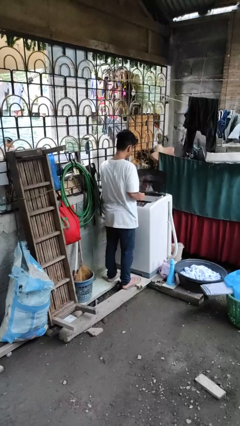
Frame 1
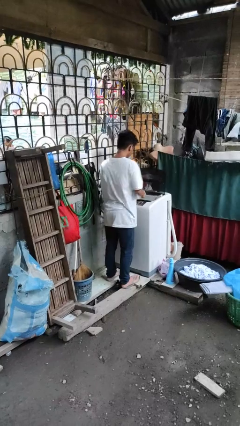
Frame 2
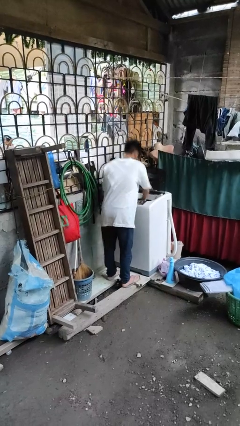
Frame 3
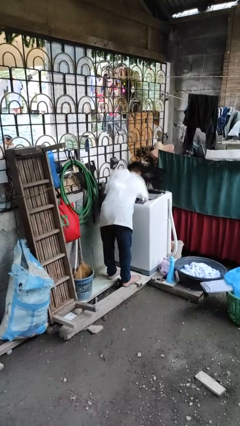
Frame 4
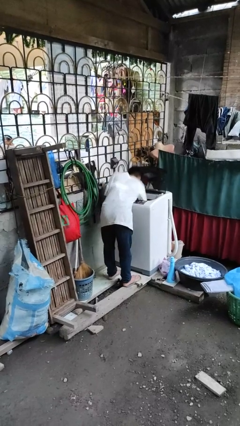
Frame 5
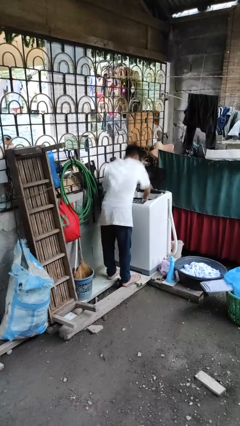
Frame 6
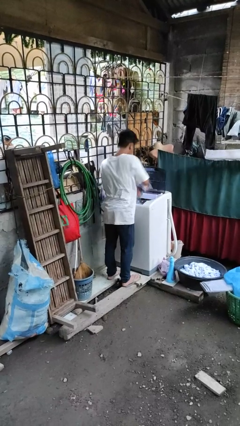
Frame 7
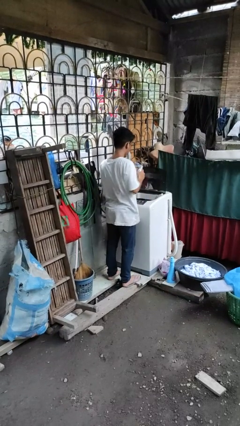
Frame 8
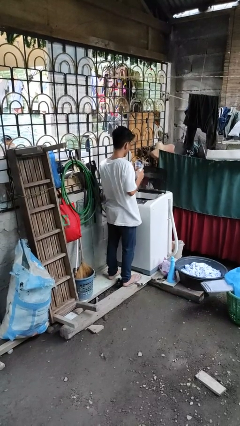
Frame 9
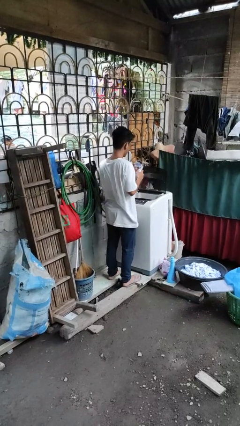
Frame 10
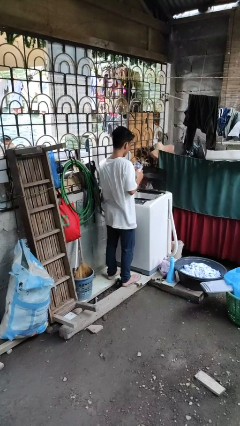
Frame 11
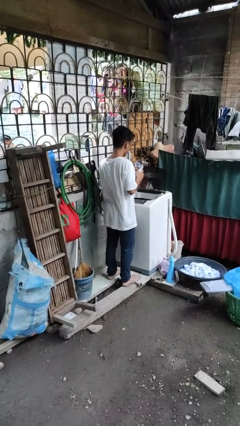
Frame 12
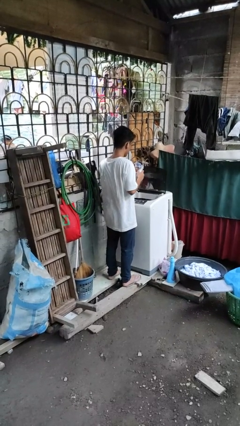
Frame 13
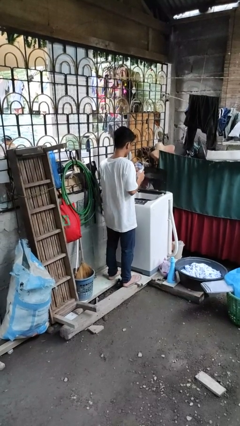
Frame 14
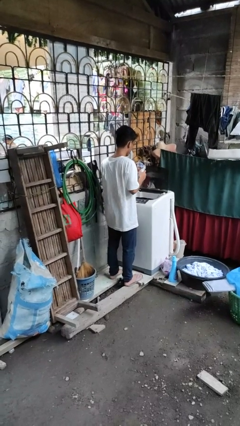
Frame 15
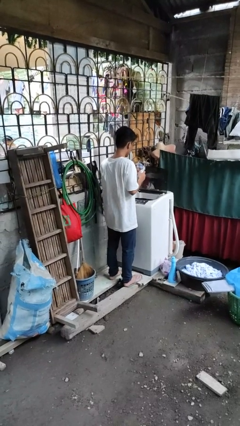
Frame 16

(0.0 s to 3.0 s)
person unloads clotheswasher

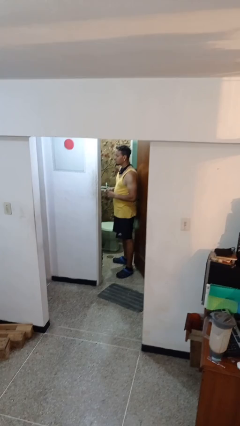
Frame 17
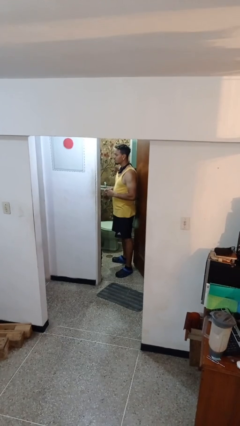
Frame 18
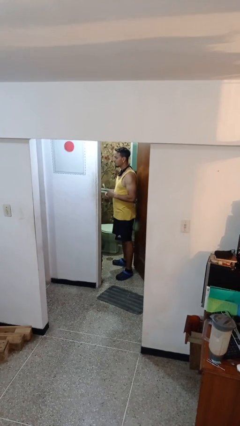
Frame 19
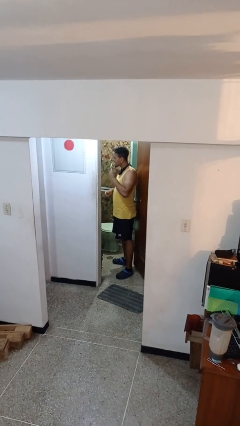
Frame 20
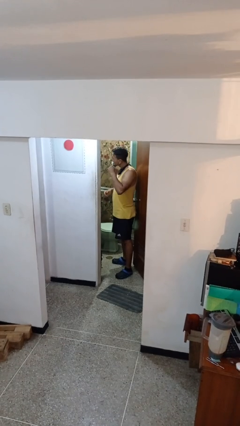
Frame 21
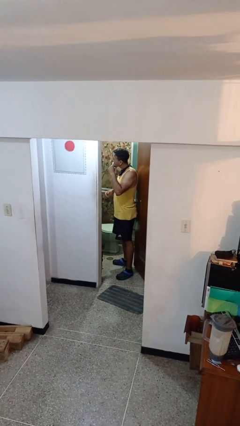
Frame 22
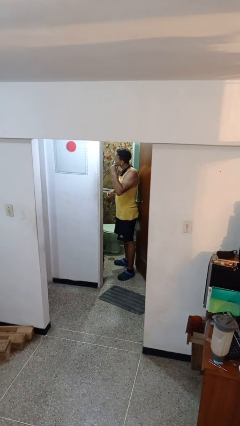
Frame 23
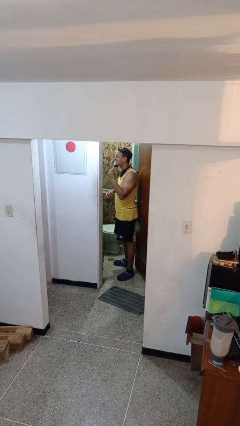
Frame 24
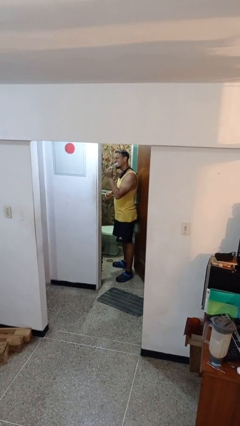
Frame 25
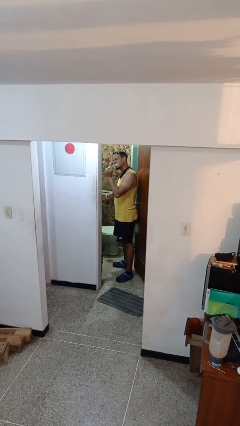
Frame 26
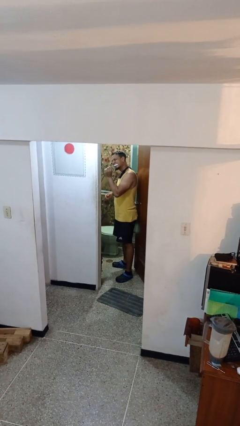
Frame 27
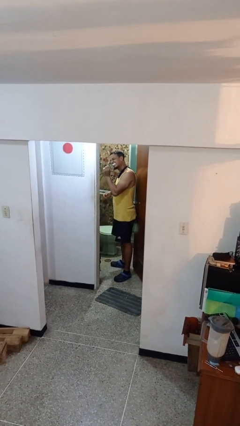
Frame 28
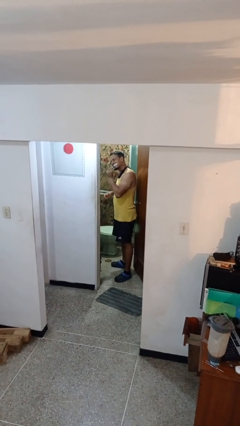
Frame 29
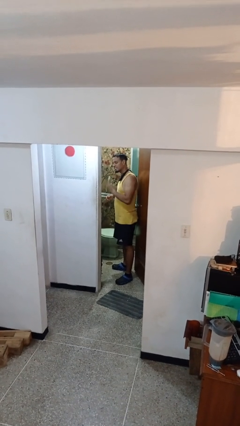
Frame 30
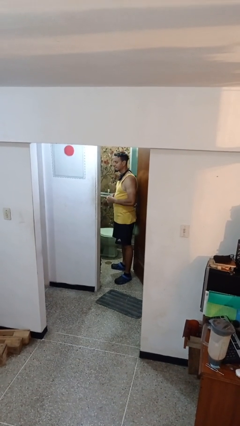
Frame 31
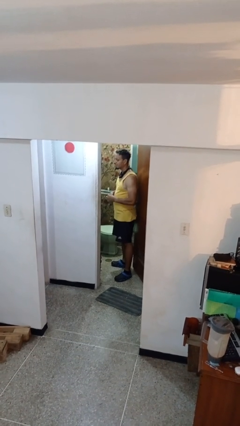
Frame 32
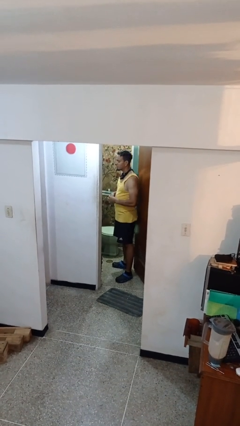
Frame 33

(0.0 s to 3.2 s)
person brushes teeth

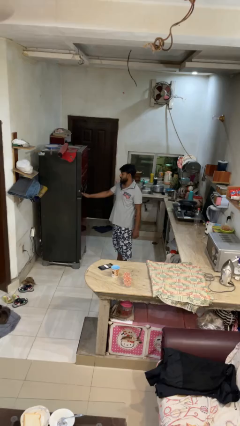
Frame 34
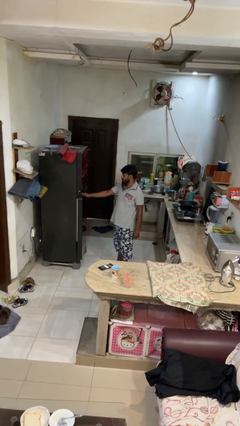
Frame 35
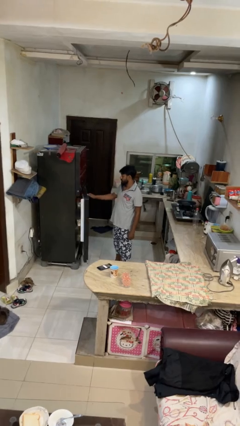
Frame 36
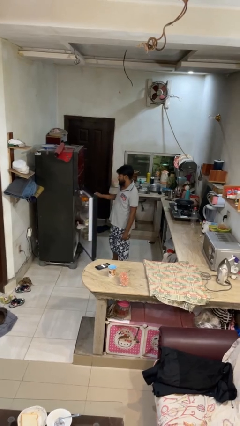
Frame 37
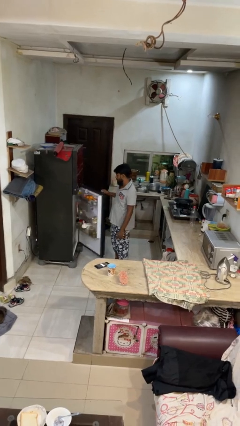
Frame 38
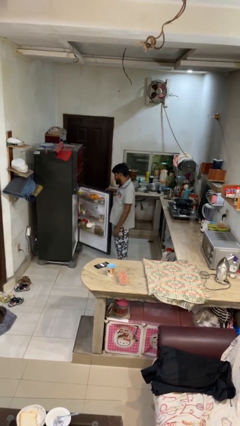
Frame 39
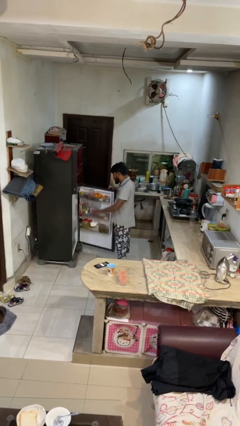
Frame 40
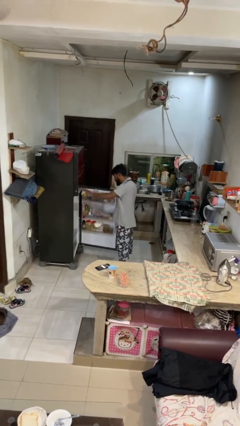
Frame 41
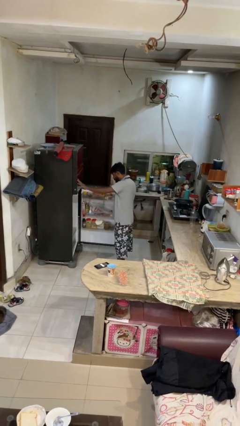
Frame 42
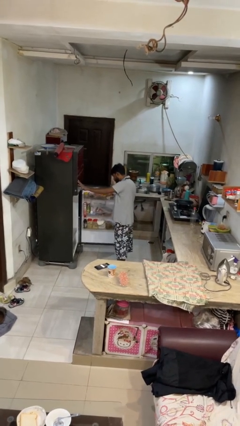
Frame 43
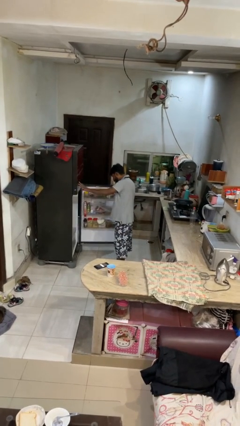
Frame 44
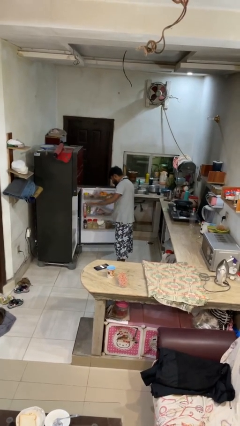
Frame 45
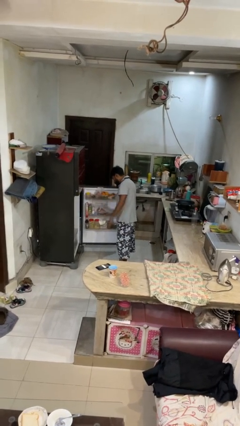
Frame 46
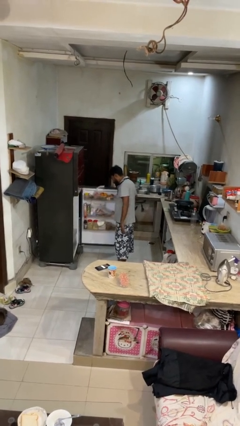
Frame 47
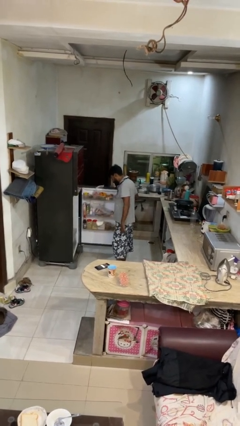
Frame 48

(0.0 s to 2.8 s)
person opens refrigerator

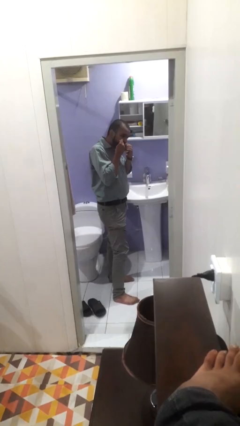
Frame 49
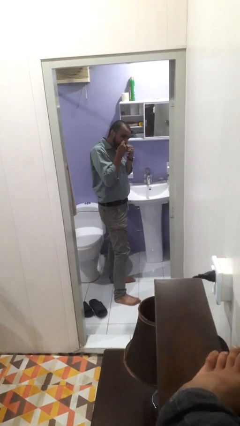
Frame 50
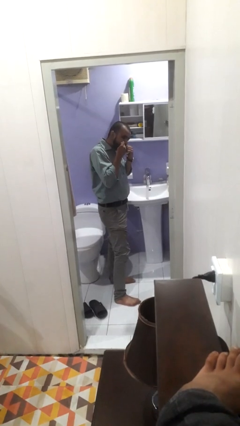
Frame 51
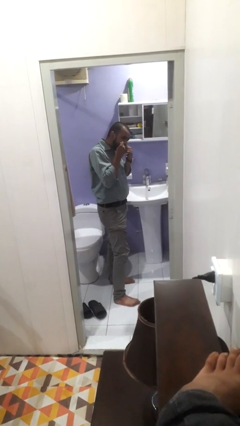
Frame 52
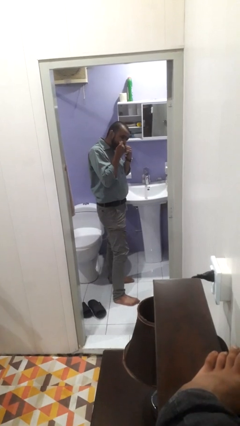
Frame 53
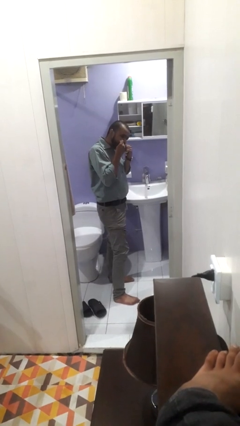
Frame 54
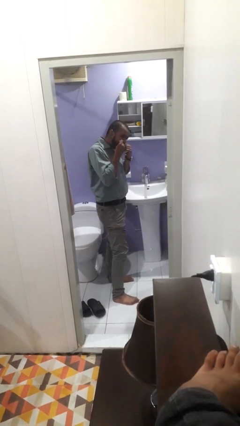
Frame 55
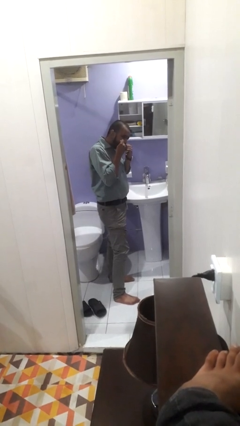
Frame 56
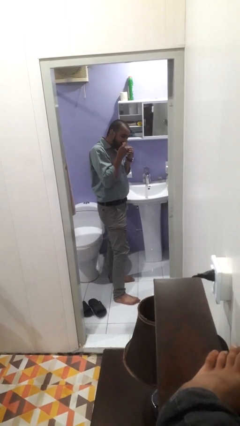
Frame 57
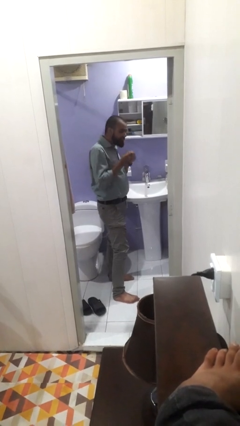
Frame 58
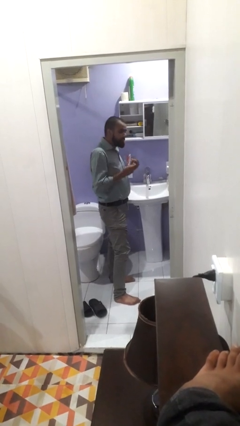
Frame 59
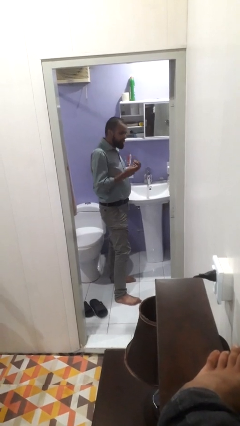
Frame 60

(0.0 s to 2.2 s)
person flosses

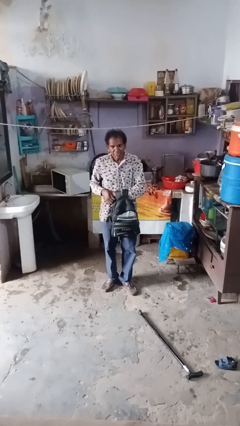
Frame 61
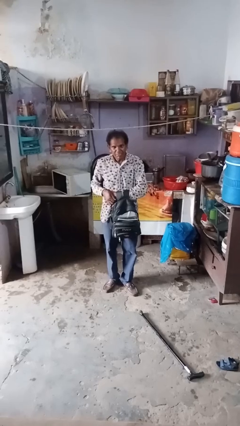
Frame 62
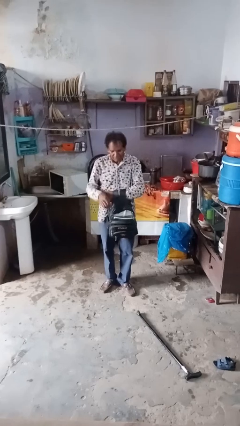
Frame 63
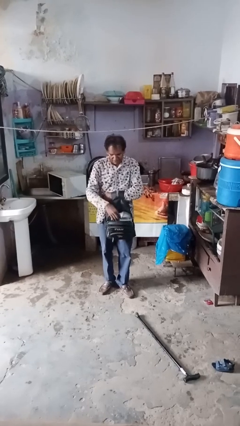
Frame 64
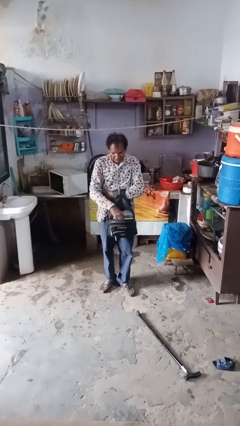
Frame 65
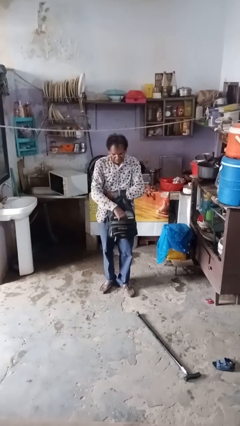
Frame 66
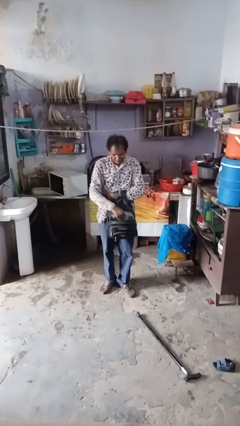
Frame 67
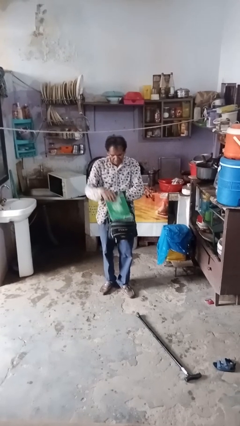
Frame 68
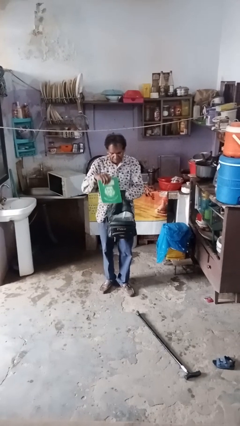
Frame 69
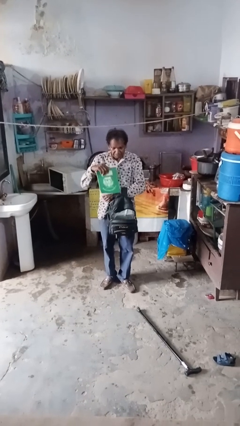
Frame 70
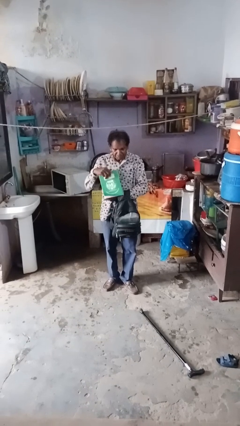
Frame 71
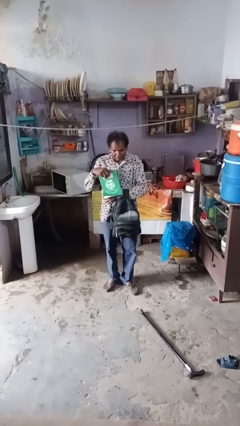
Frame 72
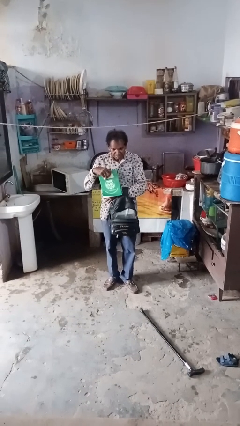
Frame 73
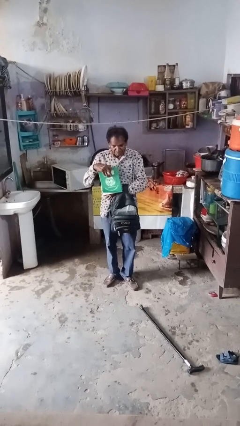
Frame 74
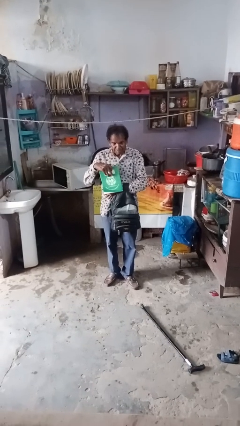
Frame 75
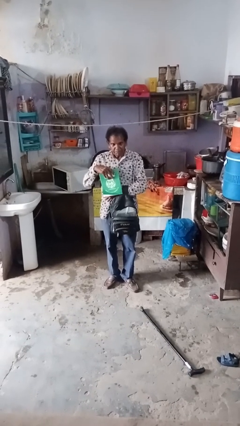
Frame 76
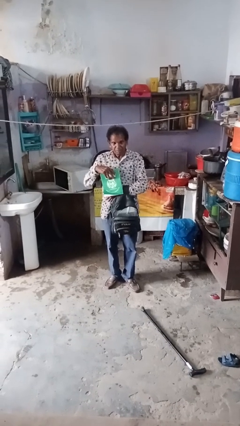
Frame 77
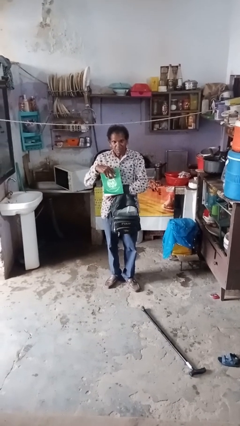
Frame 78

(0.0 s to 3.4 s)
person takes object from bag

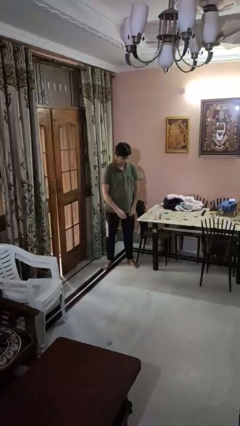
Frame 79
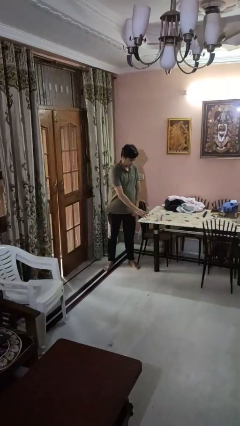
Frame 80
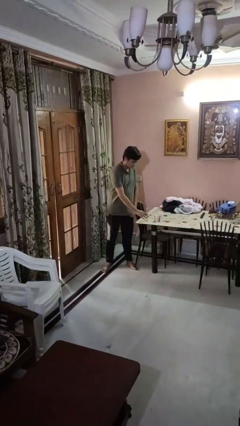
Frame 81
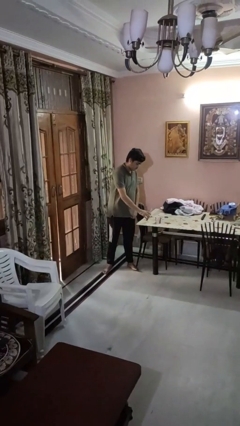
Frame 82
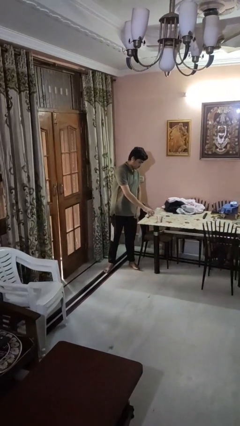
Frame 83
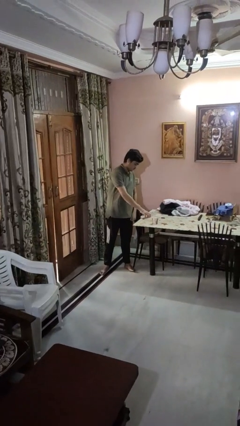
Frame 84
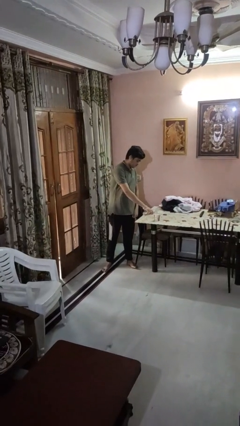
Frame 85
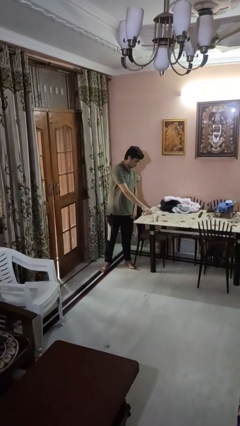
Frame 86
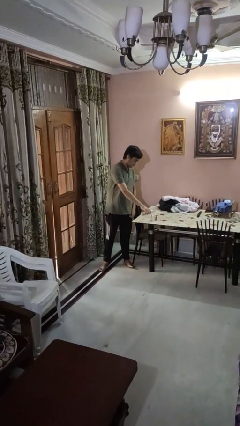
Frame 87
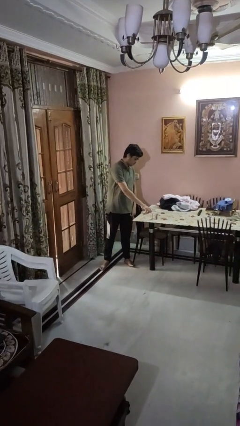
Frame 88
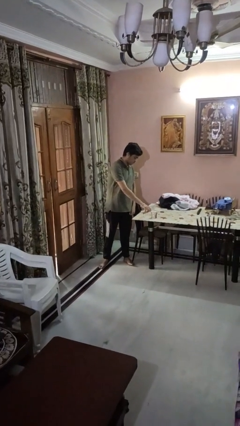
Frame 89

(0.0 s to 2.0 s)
person pours liquid into cup

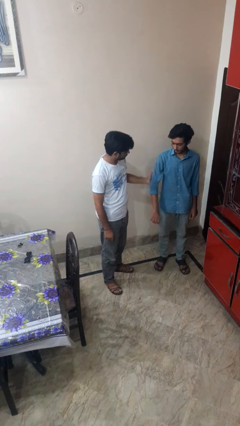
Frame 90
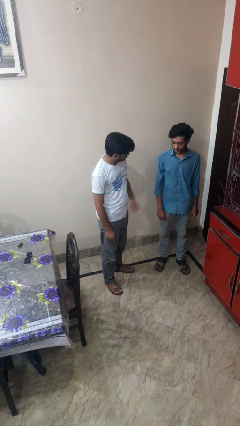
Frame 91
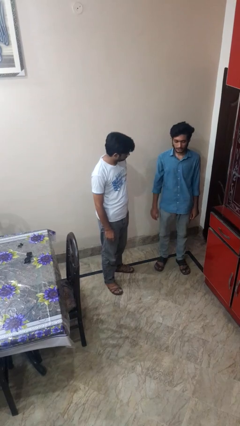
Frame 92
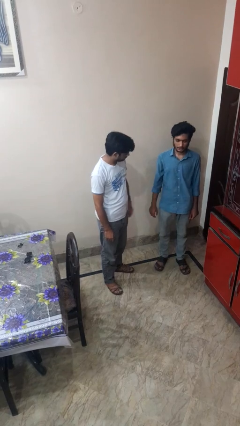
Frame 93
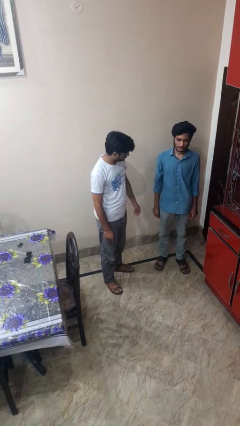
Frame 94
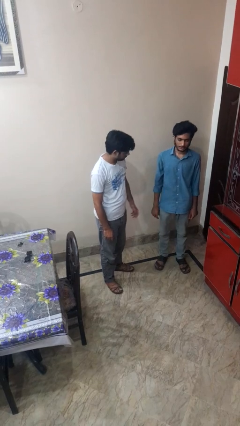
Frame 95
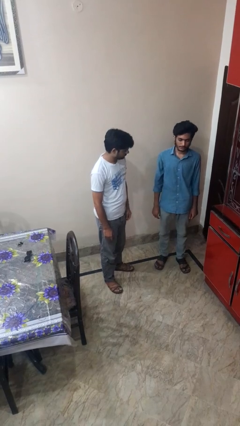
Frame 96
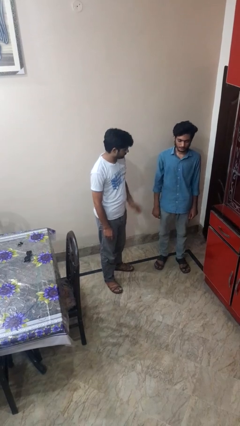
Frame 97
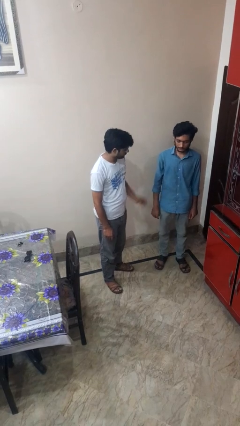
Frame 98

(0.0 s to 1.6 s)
person puts object into backpack
